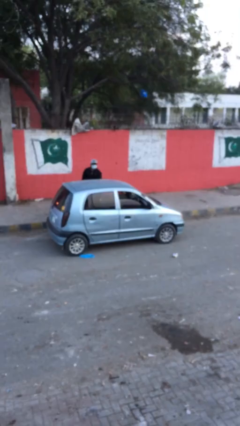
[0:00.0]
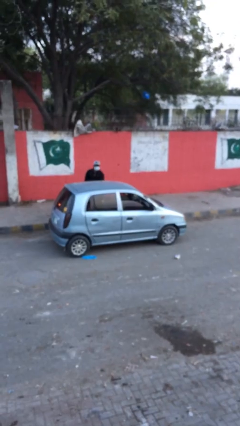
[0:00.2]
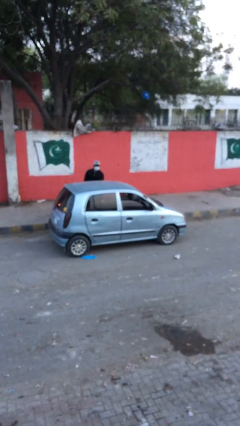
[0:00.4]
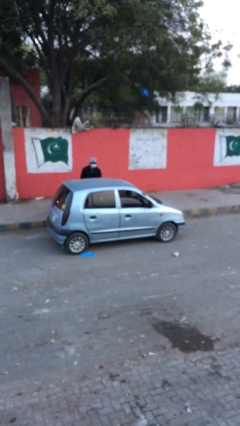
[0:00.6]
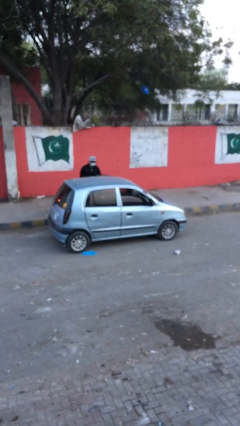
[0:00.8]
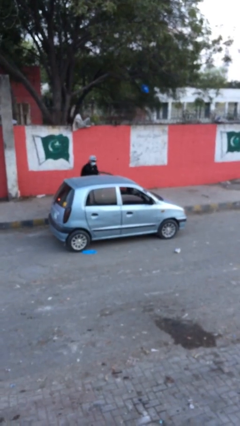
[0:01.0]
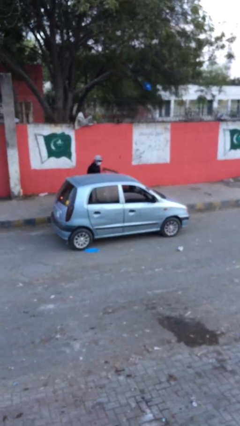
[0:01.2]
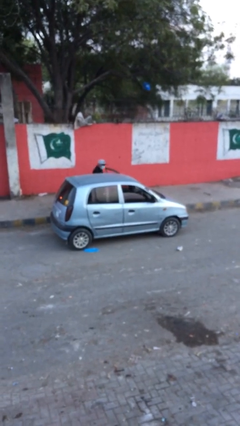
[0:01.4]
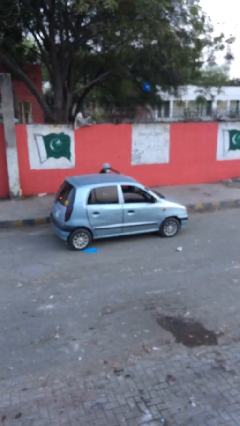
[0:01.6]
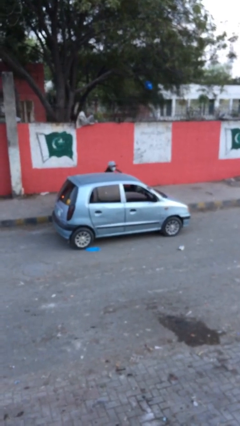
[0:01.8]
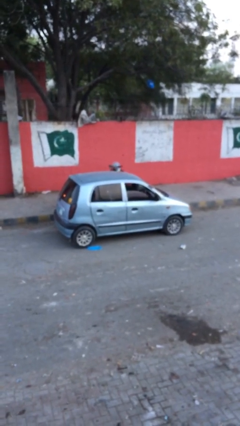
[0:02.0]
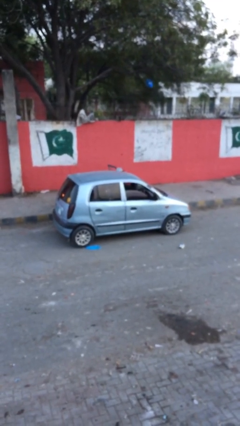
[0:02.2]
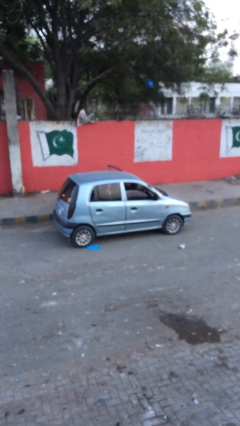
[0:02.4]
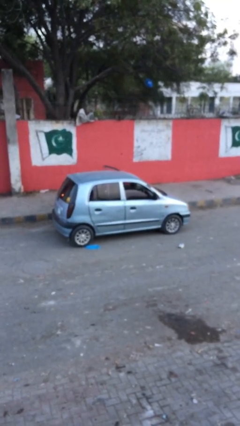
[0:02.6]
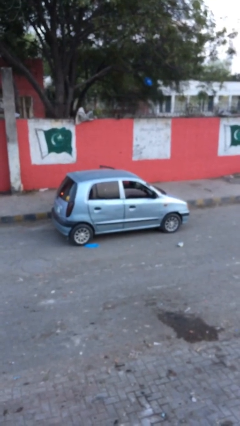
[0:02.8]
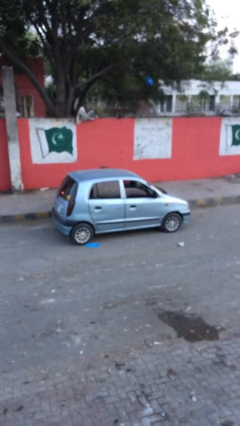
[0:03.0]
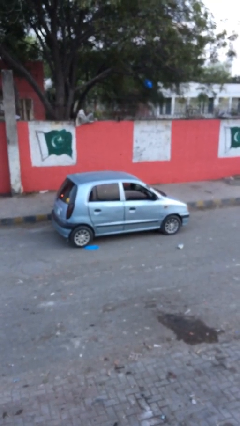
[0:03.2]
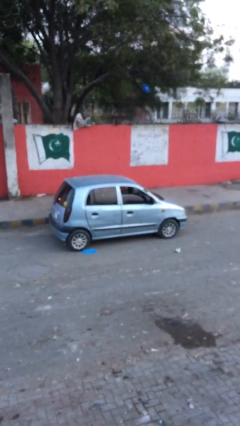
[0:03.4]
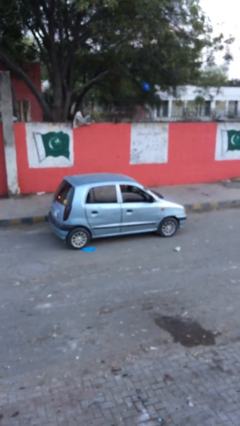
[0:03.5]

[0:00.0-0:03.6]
car picks up person

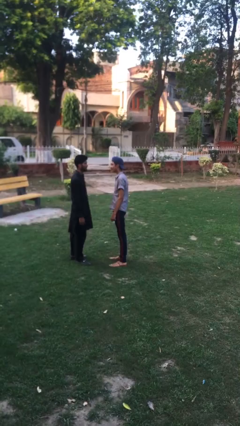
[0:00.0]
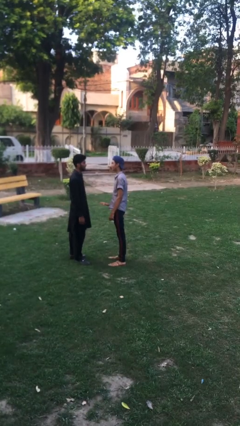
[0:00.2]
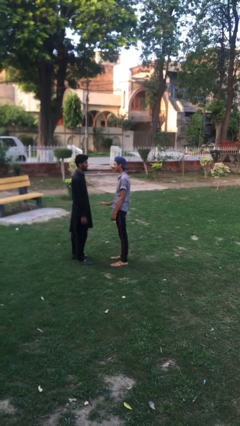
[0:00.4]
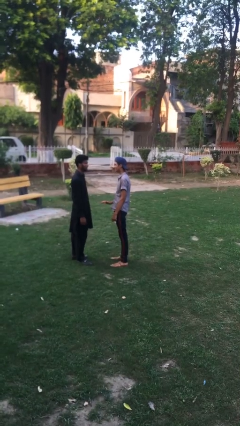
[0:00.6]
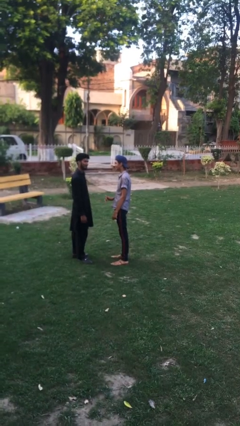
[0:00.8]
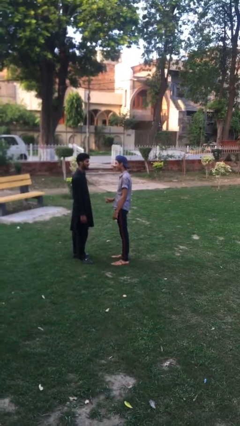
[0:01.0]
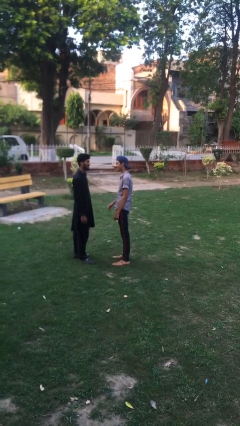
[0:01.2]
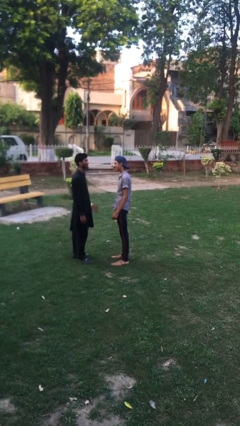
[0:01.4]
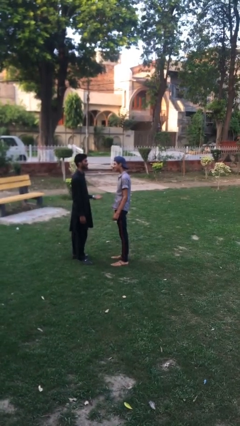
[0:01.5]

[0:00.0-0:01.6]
person talks to person

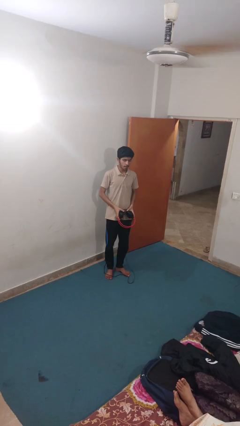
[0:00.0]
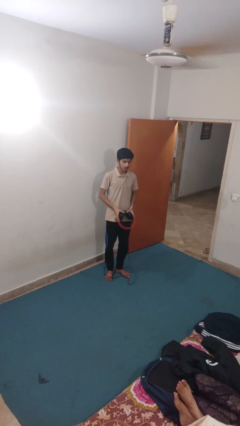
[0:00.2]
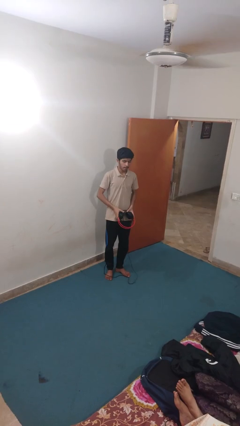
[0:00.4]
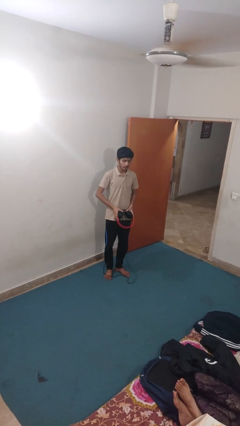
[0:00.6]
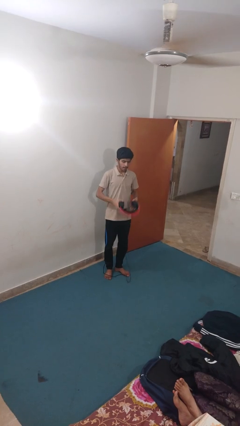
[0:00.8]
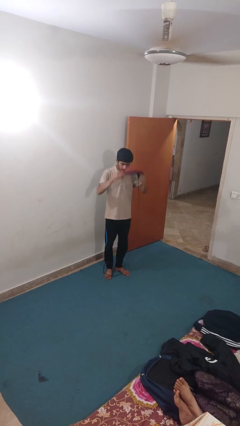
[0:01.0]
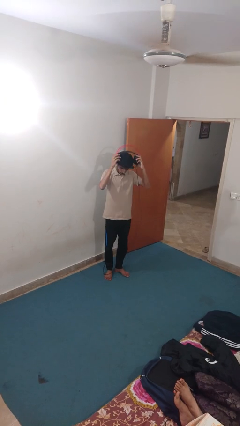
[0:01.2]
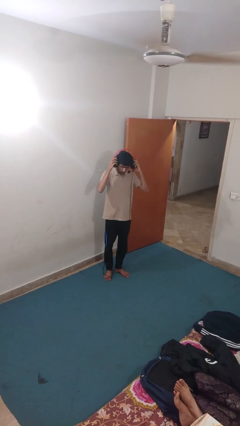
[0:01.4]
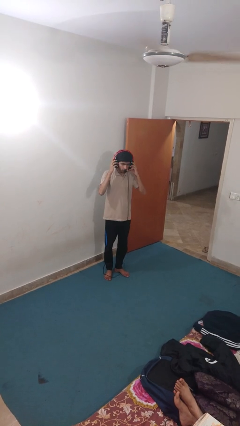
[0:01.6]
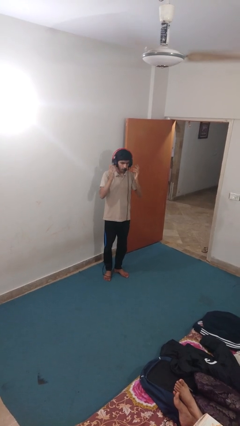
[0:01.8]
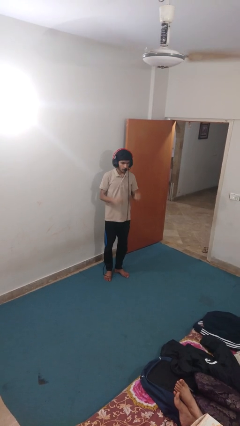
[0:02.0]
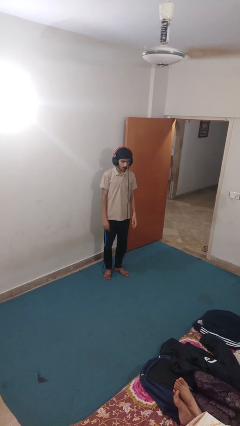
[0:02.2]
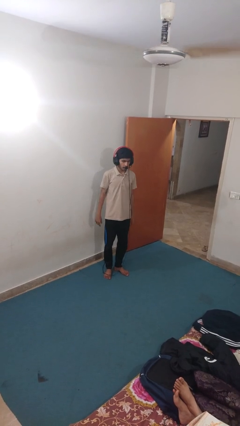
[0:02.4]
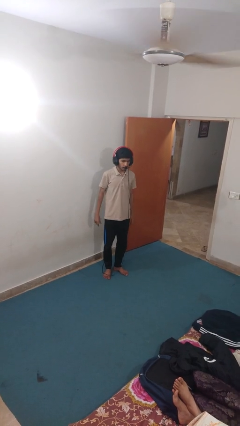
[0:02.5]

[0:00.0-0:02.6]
person puts on headphones

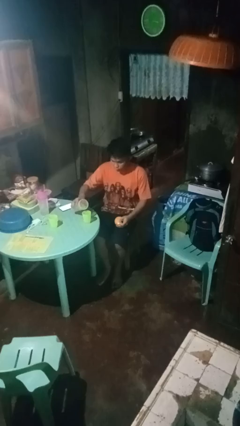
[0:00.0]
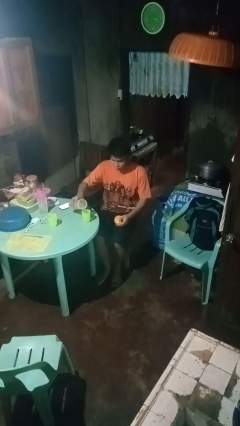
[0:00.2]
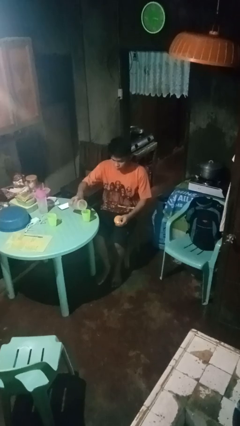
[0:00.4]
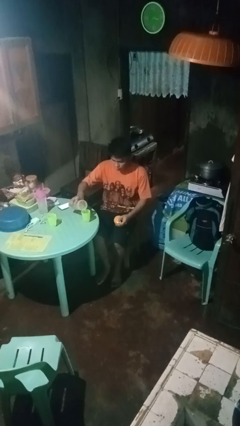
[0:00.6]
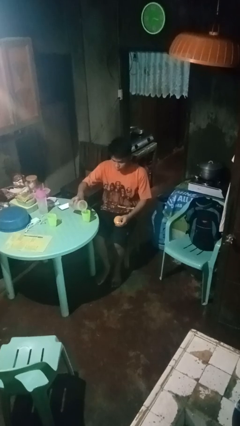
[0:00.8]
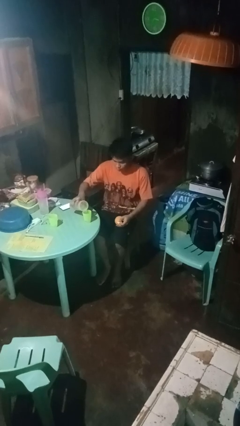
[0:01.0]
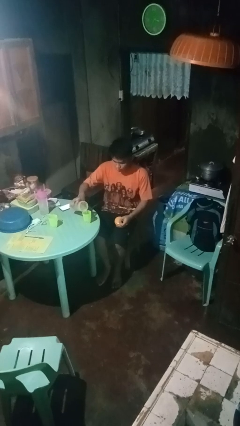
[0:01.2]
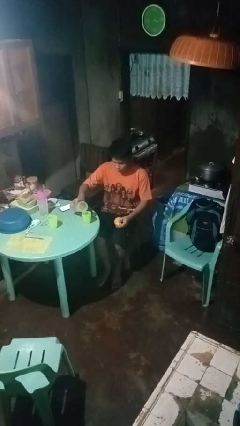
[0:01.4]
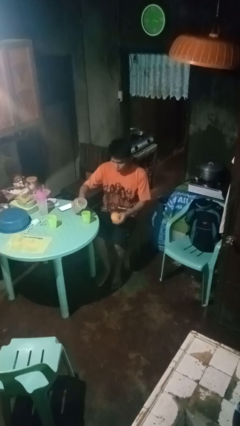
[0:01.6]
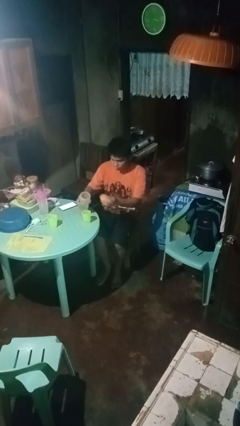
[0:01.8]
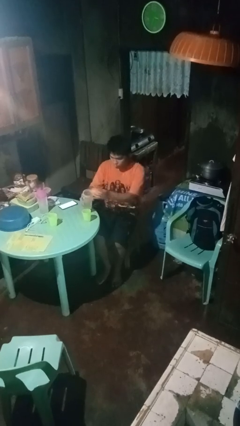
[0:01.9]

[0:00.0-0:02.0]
person pours liquid into cup

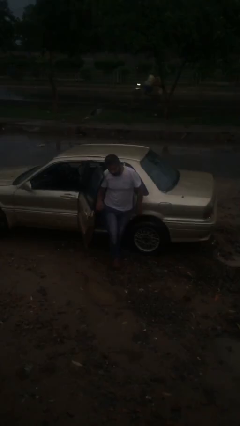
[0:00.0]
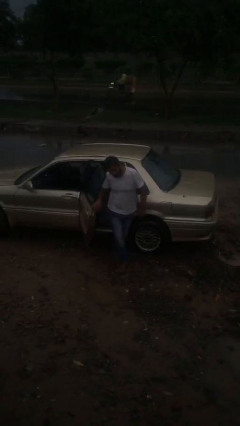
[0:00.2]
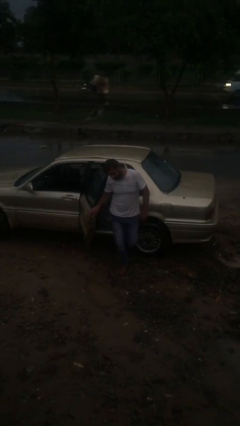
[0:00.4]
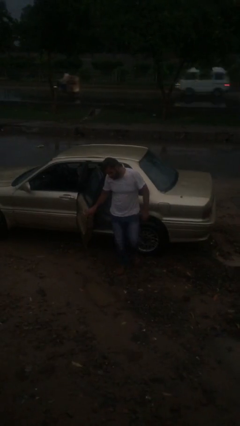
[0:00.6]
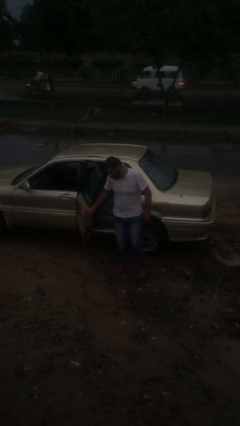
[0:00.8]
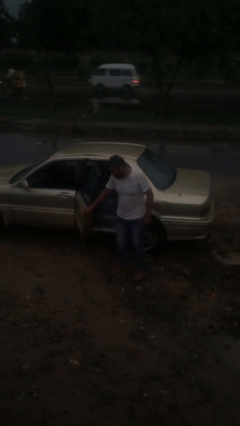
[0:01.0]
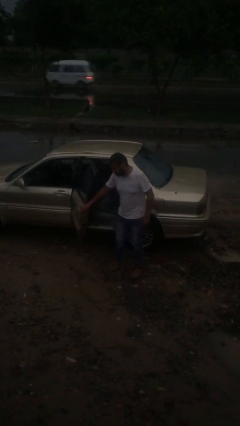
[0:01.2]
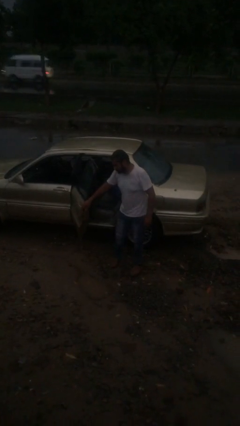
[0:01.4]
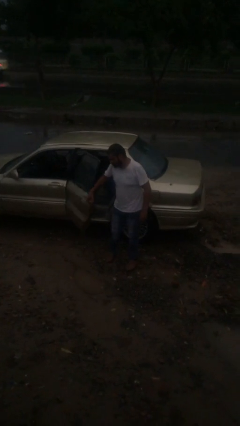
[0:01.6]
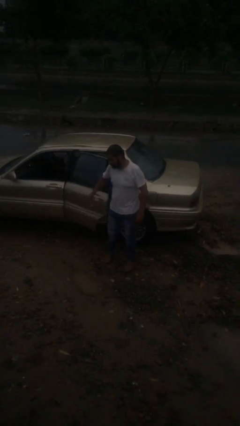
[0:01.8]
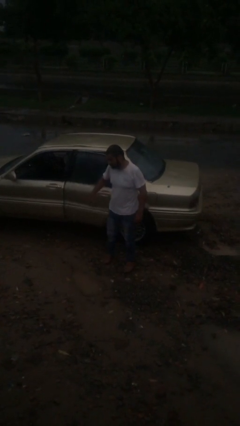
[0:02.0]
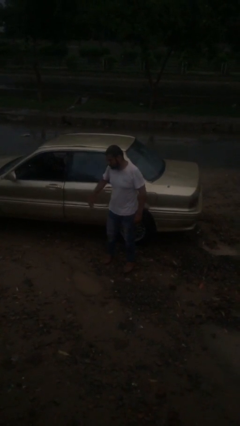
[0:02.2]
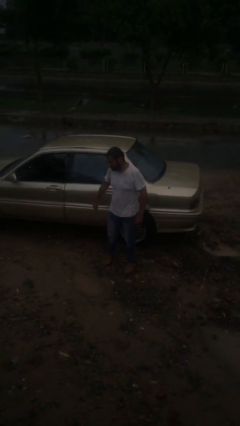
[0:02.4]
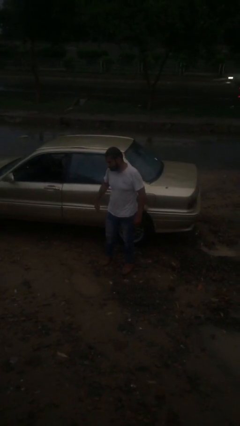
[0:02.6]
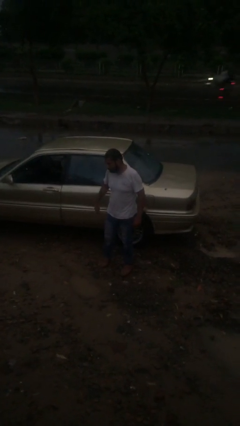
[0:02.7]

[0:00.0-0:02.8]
person closes car door

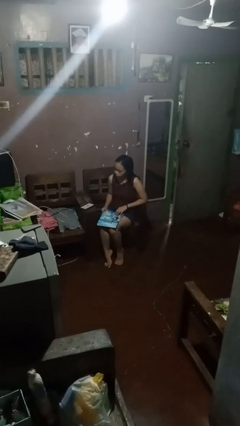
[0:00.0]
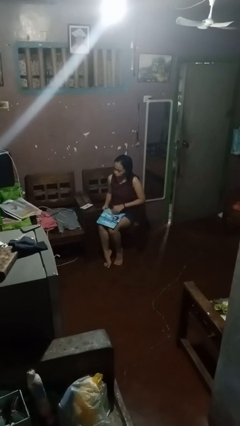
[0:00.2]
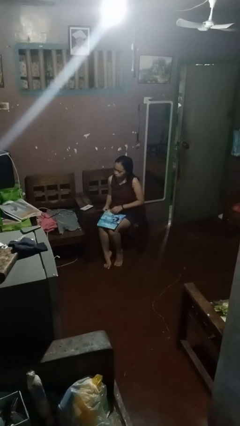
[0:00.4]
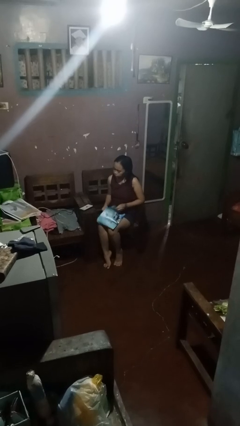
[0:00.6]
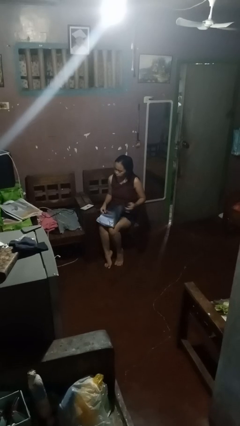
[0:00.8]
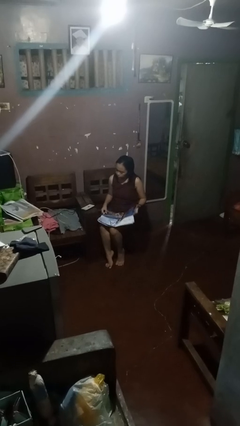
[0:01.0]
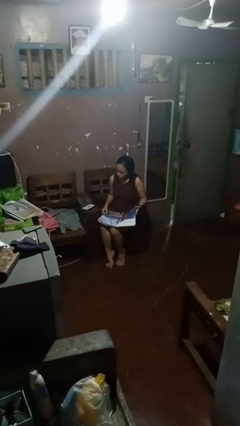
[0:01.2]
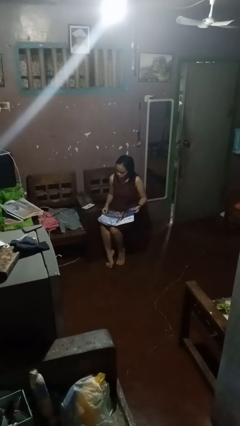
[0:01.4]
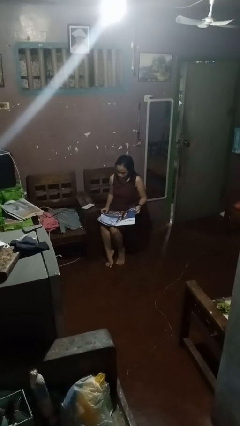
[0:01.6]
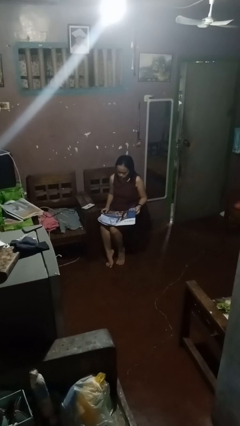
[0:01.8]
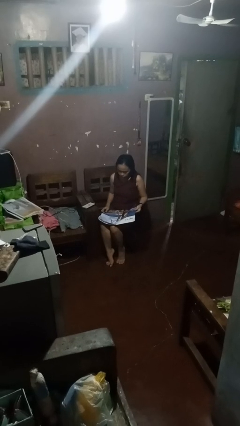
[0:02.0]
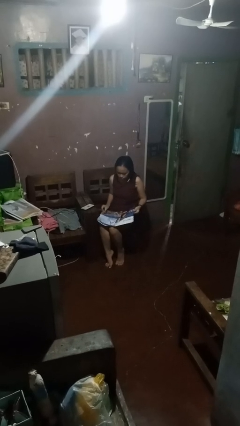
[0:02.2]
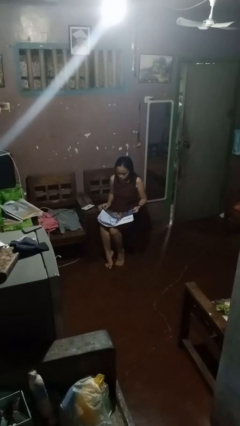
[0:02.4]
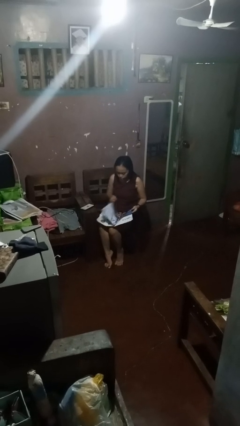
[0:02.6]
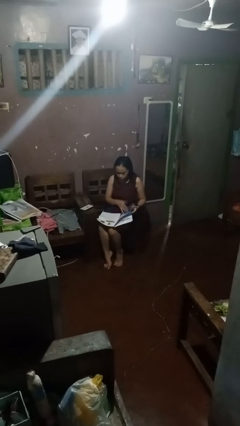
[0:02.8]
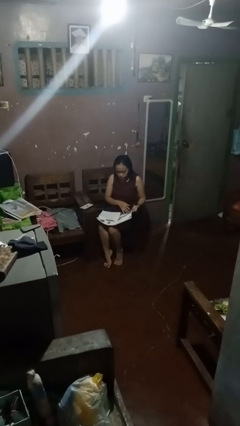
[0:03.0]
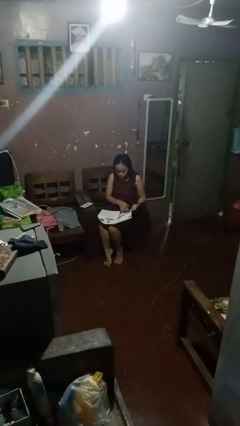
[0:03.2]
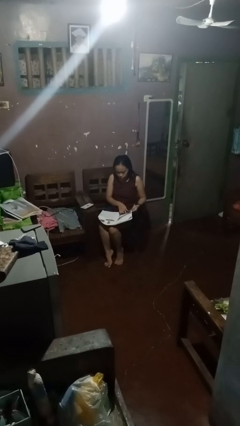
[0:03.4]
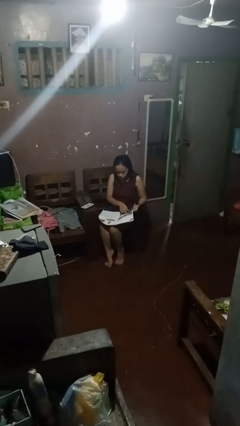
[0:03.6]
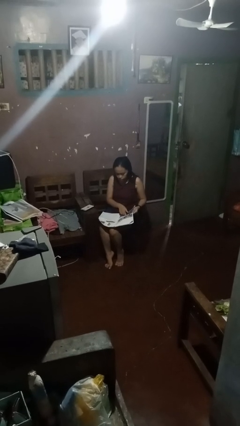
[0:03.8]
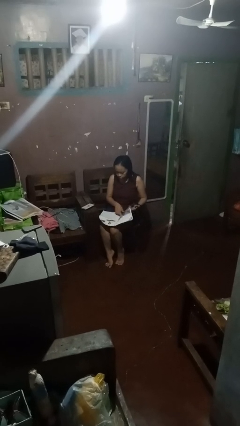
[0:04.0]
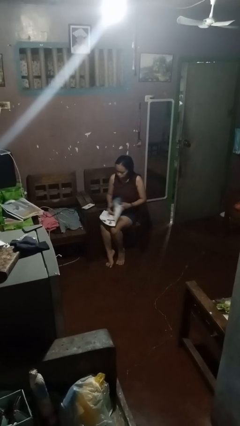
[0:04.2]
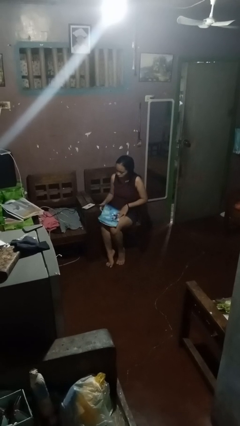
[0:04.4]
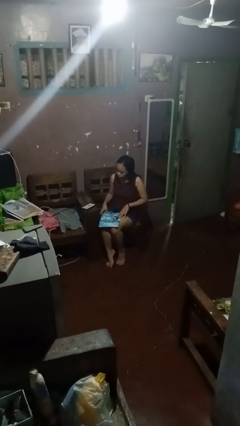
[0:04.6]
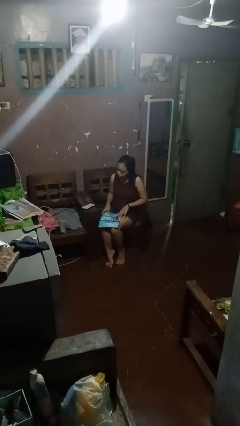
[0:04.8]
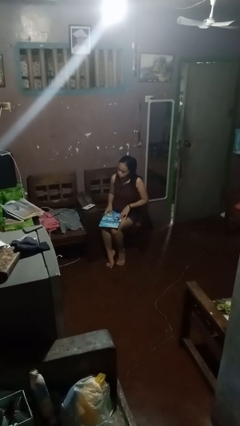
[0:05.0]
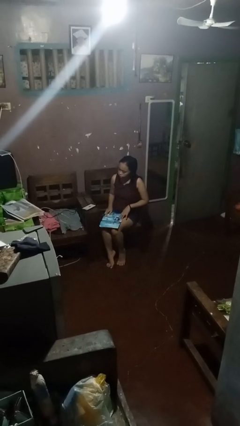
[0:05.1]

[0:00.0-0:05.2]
person reads magazine
